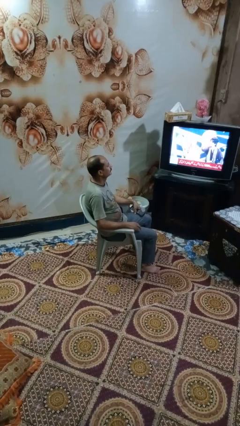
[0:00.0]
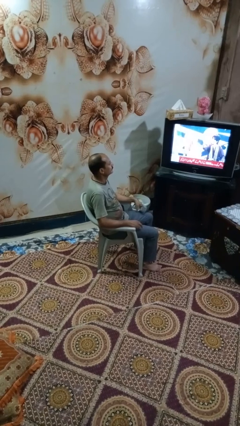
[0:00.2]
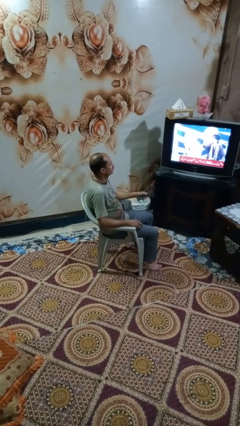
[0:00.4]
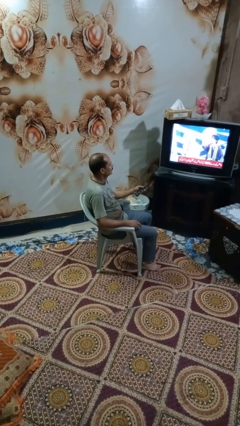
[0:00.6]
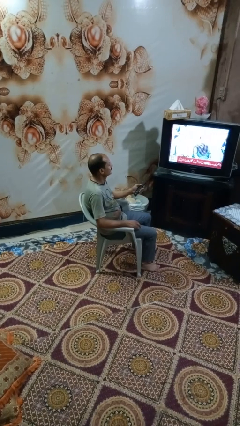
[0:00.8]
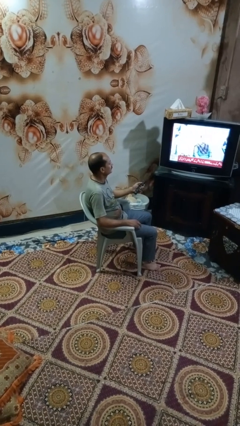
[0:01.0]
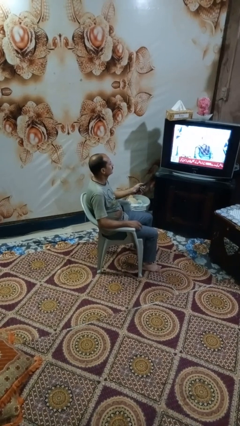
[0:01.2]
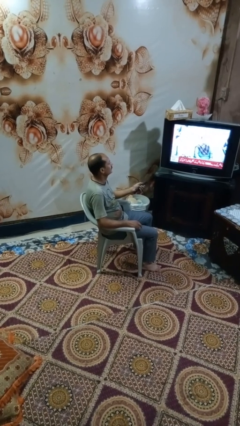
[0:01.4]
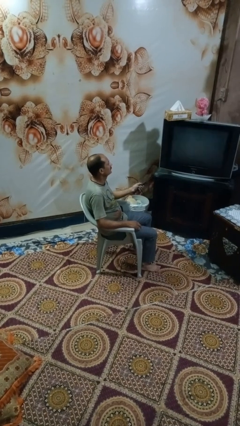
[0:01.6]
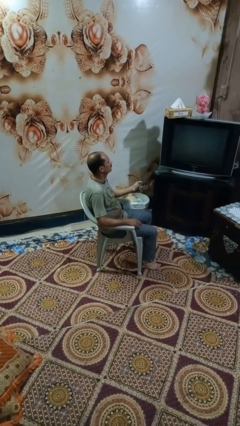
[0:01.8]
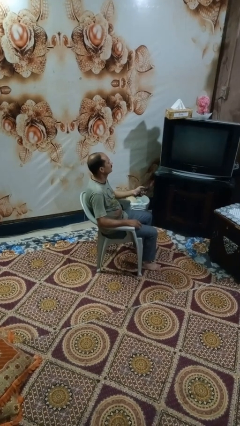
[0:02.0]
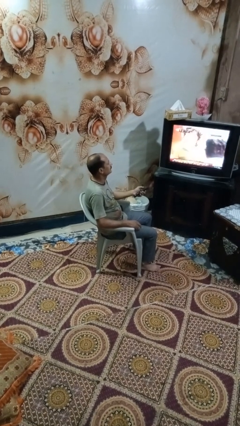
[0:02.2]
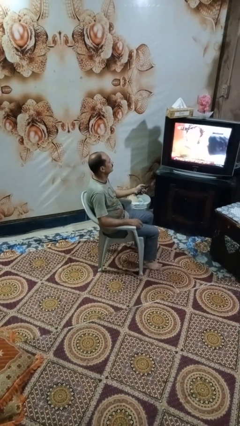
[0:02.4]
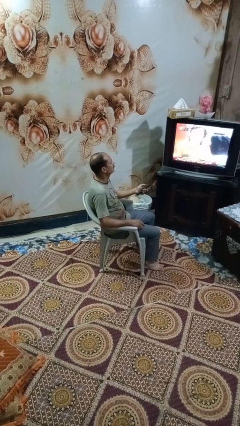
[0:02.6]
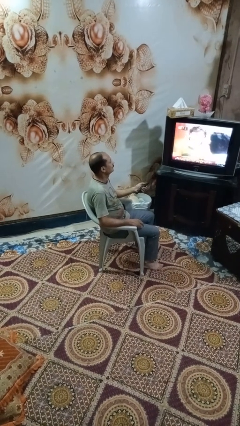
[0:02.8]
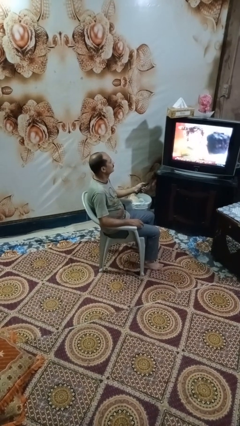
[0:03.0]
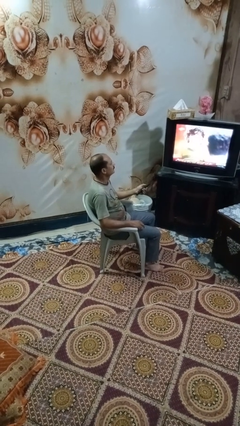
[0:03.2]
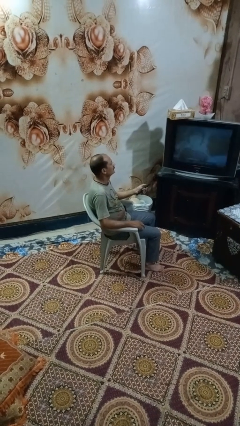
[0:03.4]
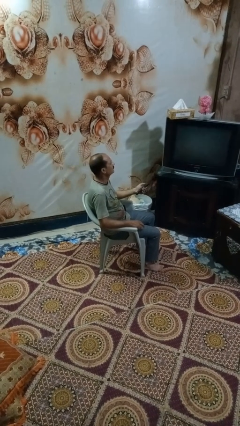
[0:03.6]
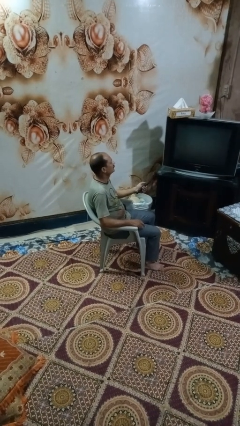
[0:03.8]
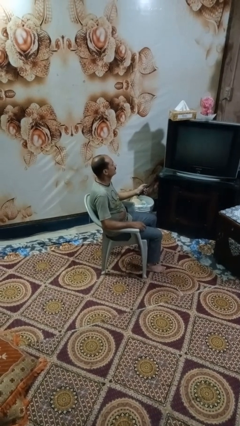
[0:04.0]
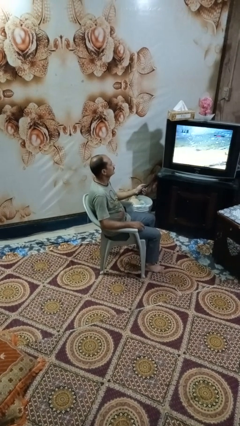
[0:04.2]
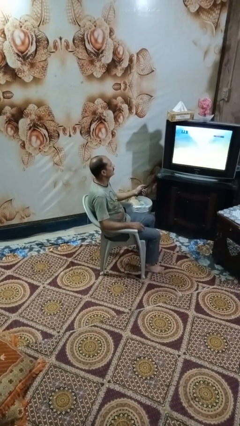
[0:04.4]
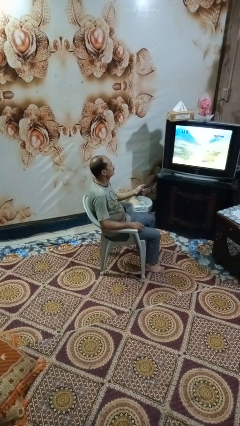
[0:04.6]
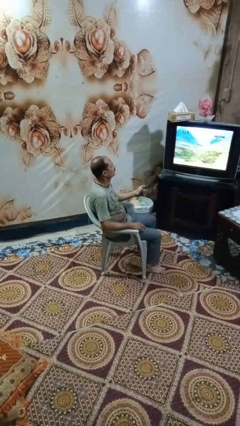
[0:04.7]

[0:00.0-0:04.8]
person uses television remote

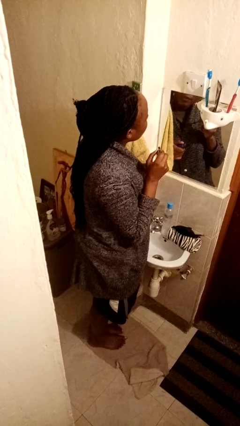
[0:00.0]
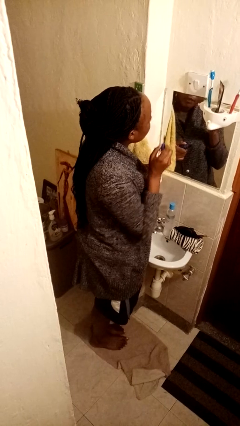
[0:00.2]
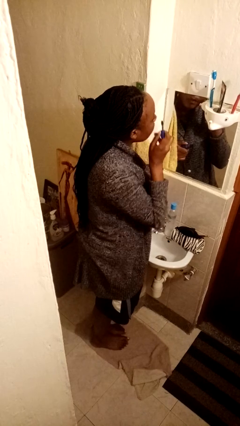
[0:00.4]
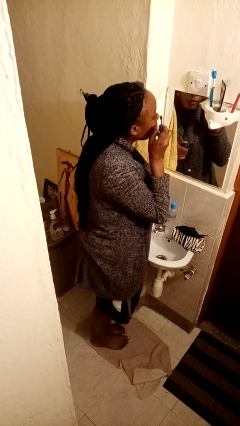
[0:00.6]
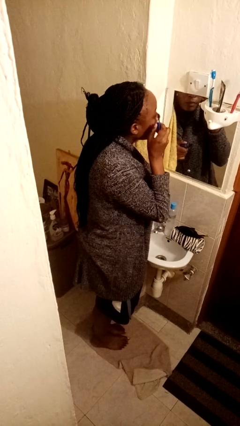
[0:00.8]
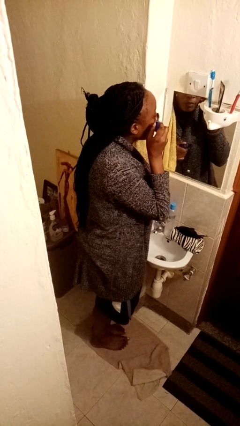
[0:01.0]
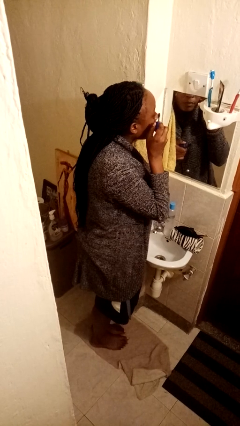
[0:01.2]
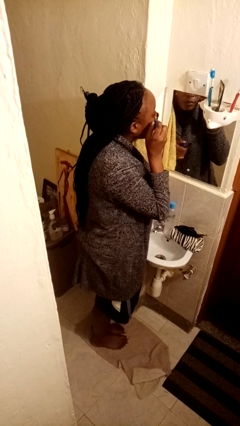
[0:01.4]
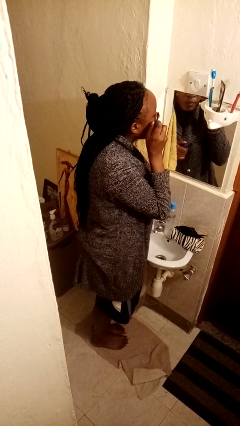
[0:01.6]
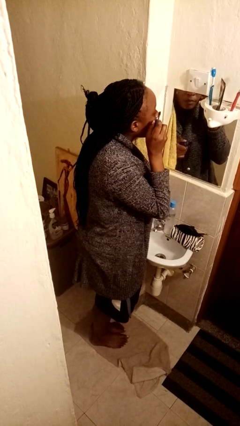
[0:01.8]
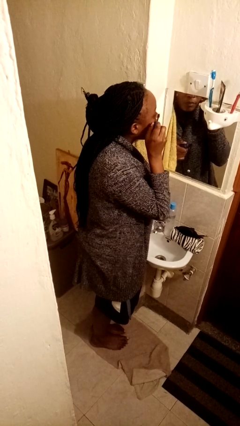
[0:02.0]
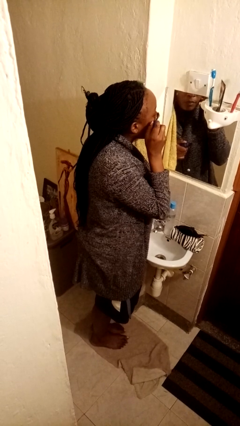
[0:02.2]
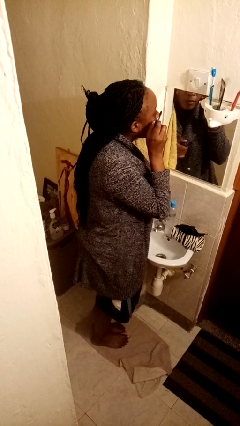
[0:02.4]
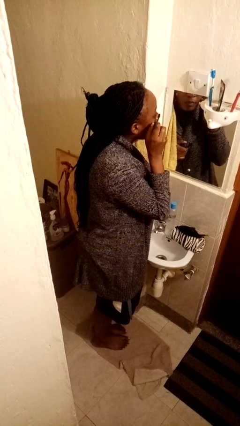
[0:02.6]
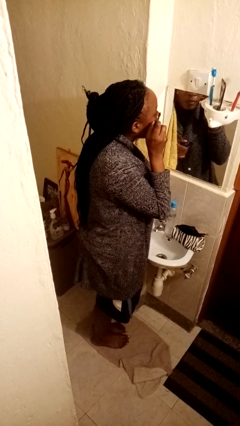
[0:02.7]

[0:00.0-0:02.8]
person applies eye makeup

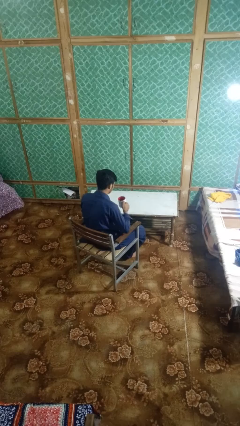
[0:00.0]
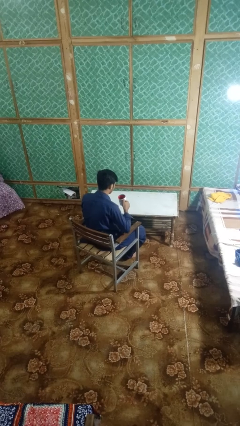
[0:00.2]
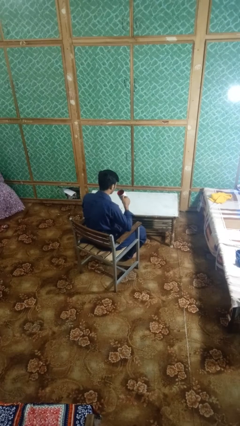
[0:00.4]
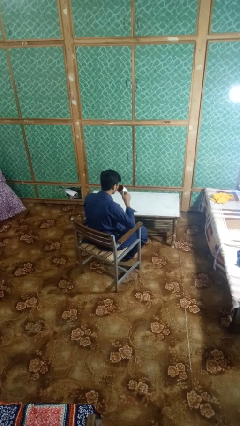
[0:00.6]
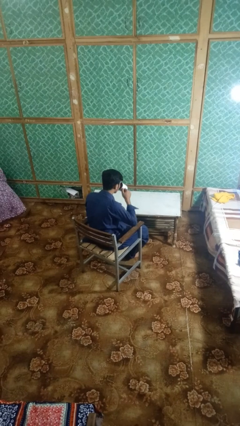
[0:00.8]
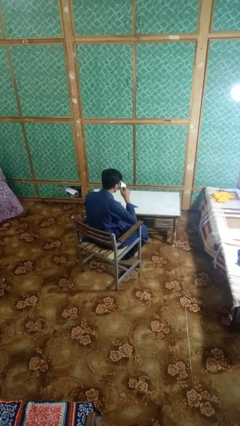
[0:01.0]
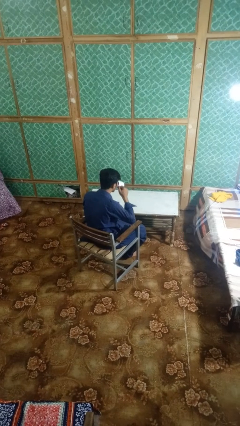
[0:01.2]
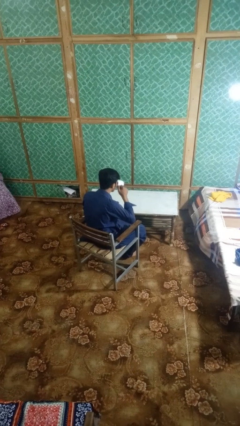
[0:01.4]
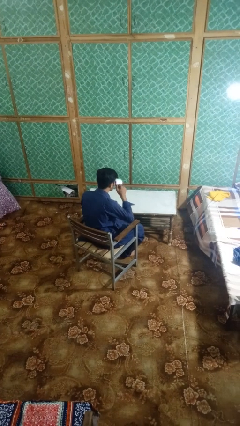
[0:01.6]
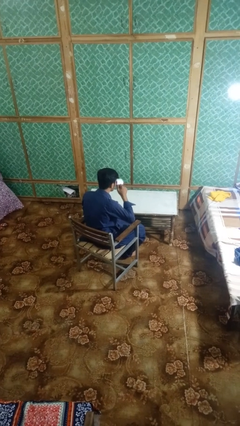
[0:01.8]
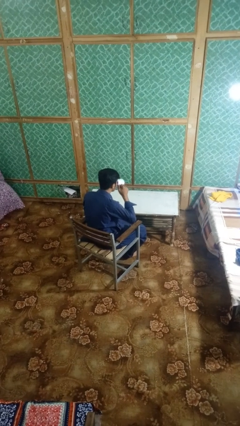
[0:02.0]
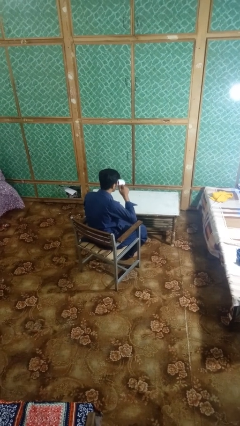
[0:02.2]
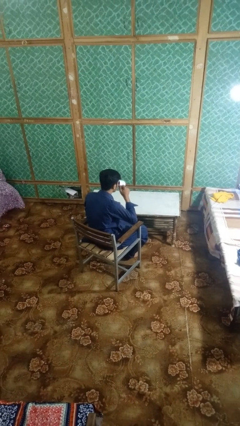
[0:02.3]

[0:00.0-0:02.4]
person drinks from mug

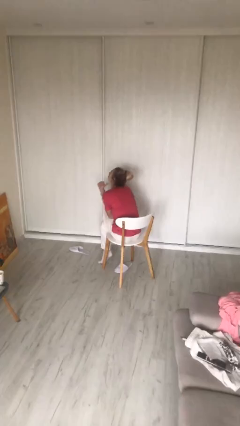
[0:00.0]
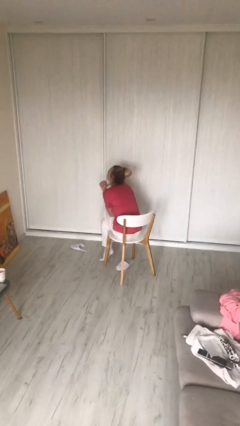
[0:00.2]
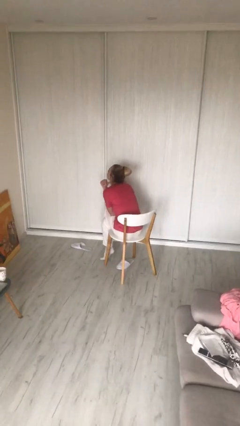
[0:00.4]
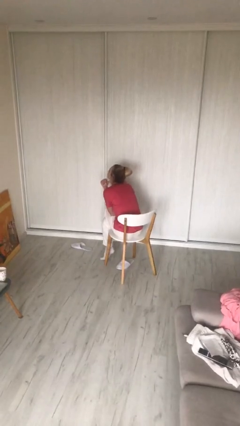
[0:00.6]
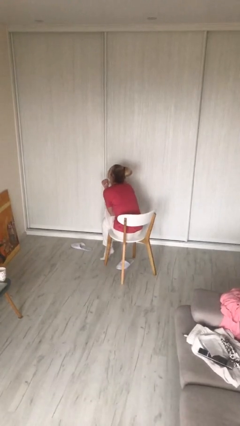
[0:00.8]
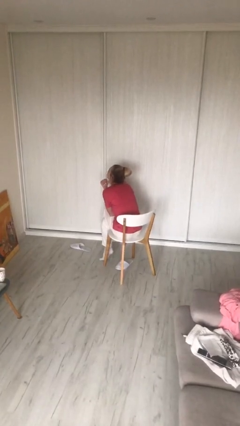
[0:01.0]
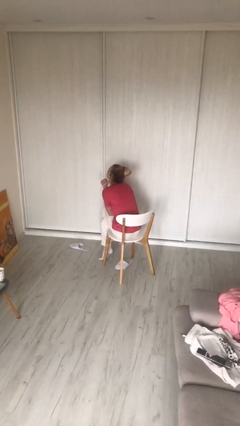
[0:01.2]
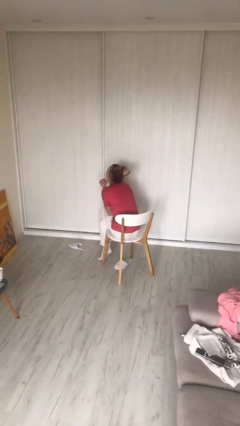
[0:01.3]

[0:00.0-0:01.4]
person strokes chin

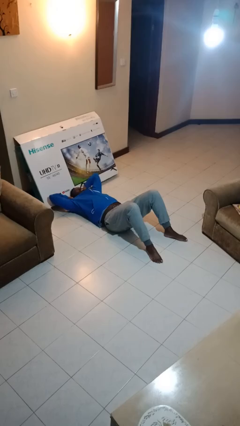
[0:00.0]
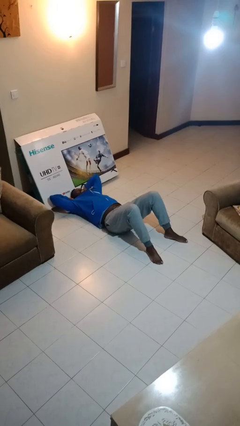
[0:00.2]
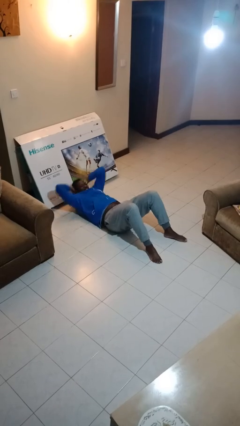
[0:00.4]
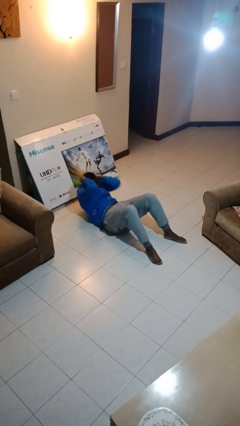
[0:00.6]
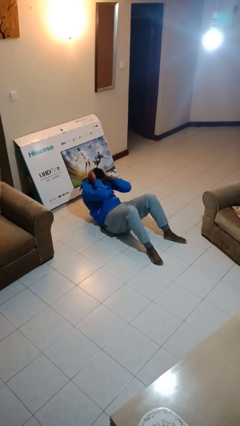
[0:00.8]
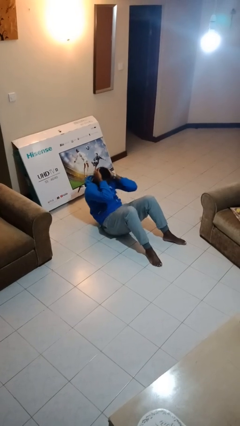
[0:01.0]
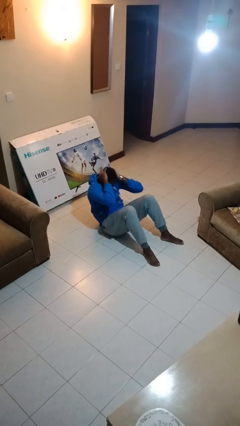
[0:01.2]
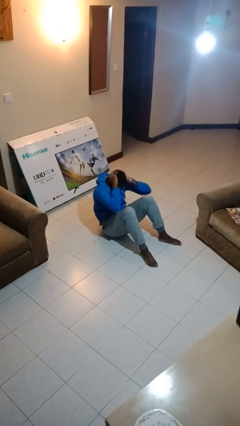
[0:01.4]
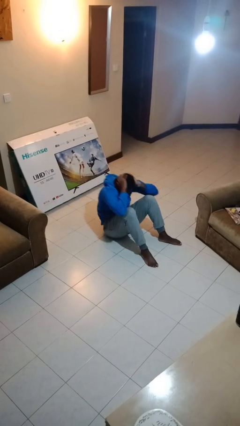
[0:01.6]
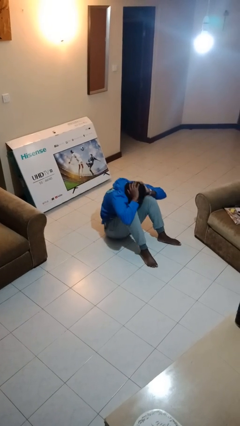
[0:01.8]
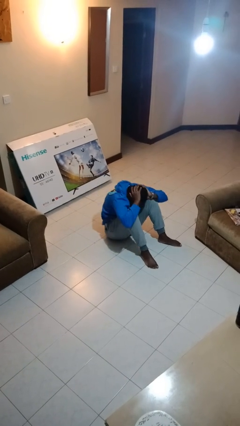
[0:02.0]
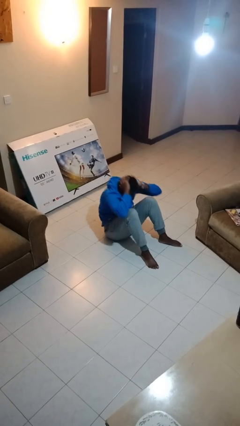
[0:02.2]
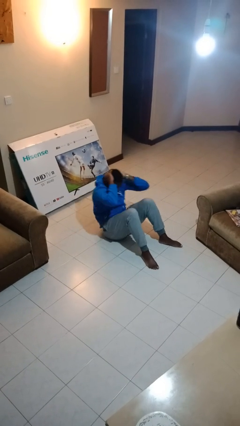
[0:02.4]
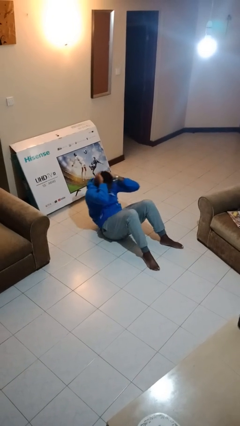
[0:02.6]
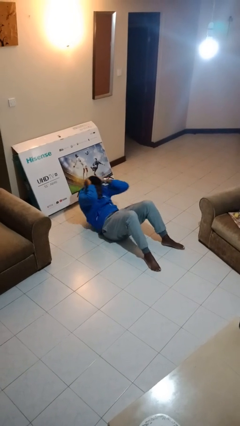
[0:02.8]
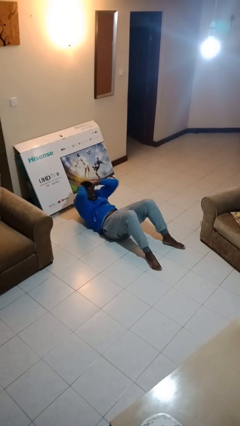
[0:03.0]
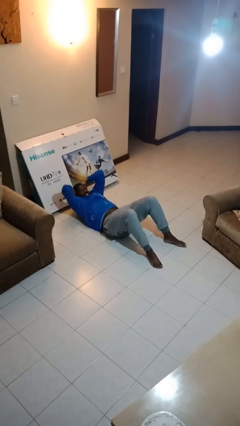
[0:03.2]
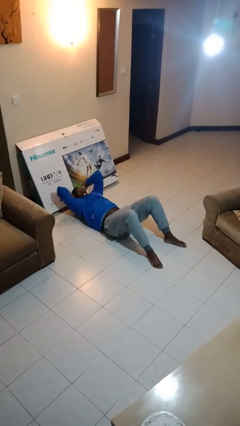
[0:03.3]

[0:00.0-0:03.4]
person exercises with situp

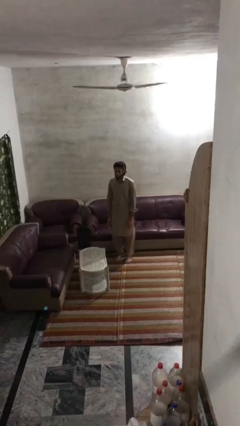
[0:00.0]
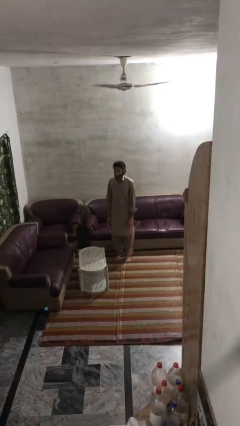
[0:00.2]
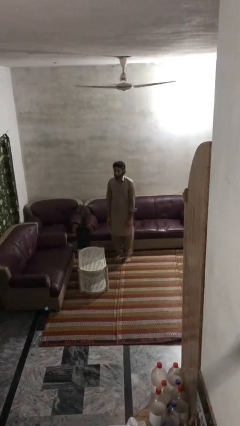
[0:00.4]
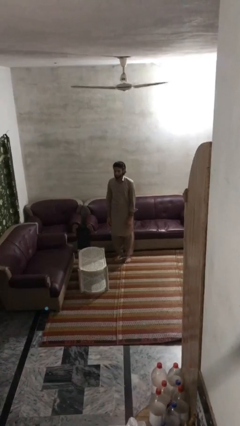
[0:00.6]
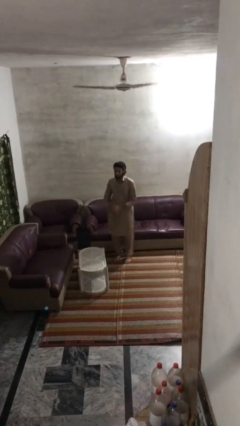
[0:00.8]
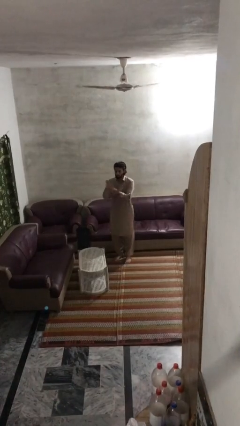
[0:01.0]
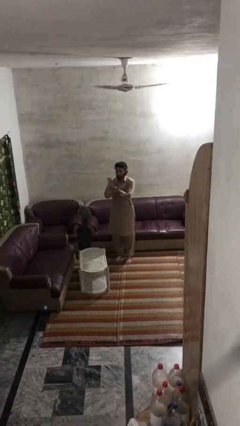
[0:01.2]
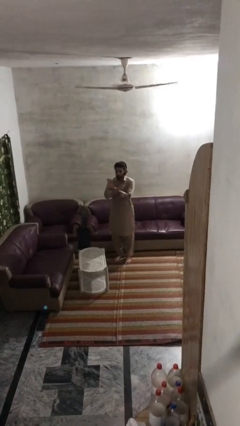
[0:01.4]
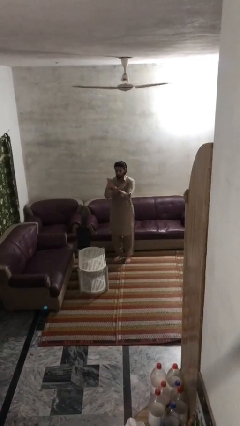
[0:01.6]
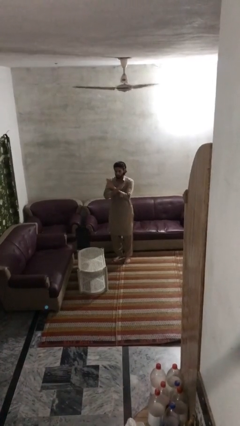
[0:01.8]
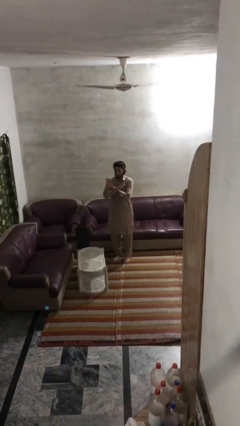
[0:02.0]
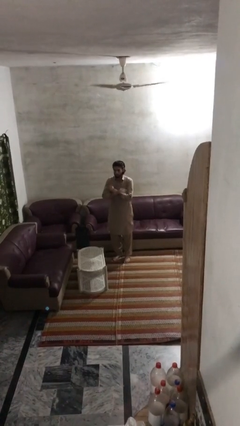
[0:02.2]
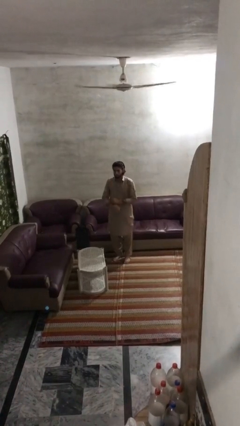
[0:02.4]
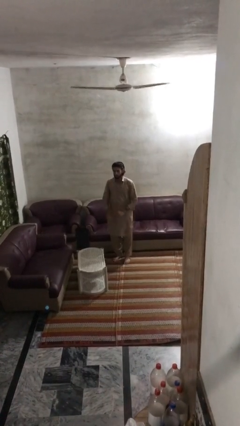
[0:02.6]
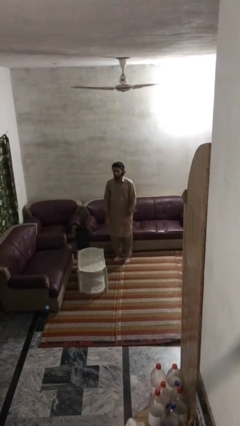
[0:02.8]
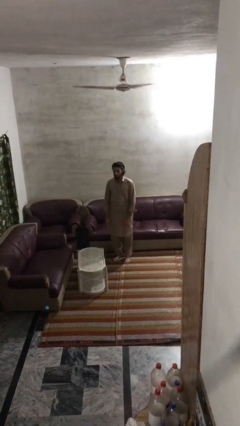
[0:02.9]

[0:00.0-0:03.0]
person gestures arms x
